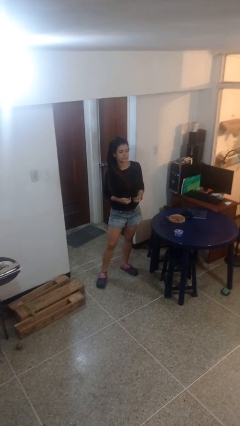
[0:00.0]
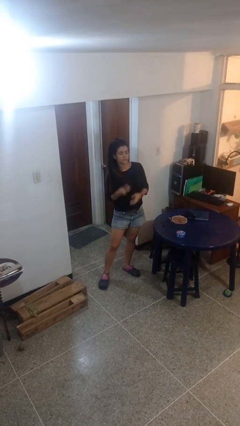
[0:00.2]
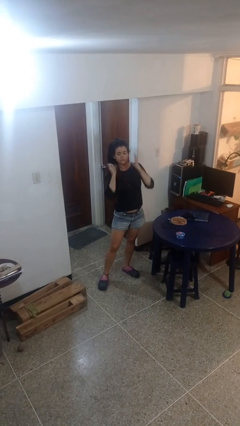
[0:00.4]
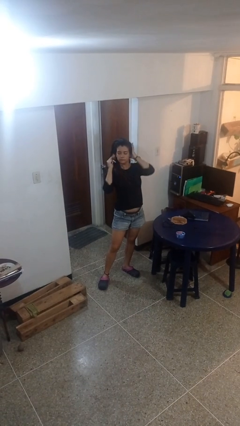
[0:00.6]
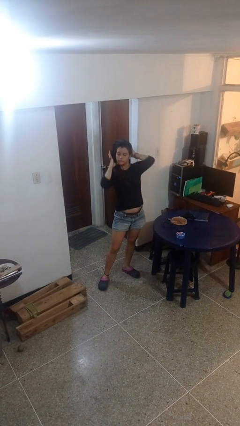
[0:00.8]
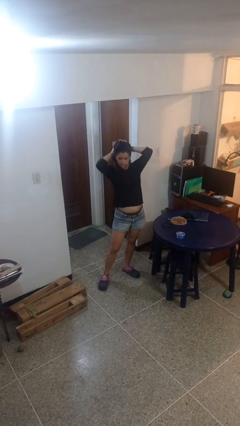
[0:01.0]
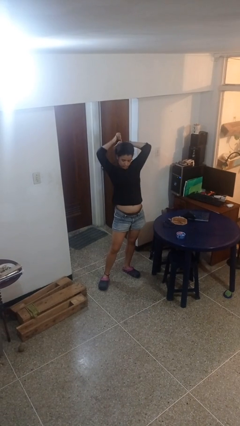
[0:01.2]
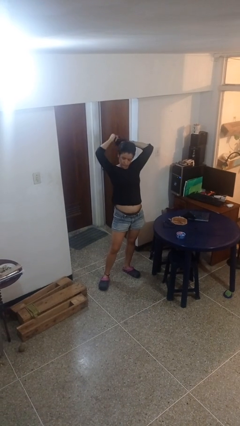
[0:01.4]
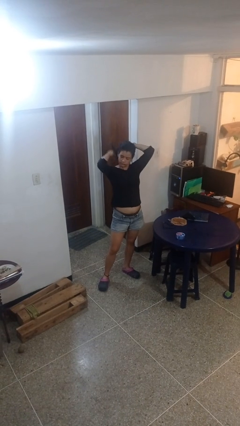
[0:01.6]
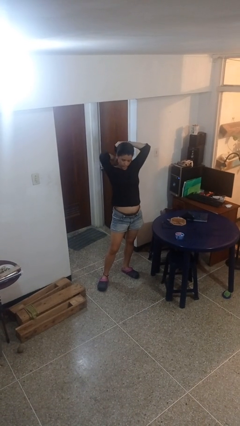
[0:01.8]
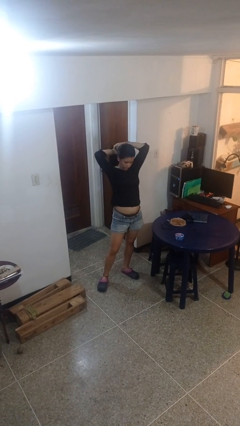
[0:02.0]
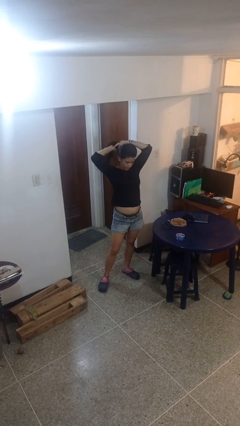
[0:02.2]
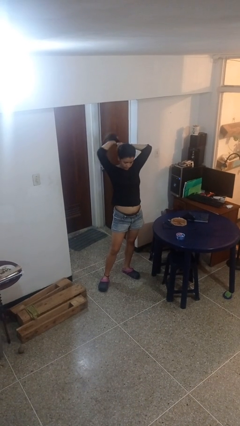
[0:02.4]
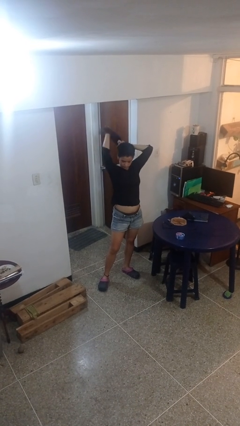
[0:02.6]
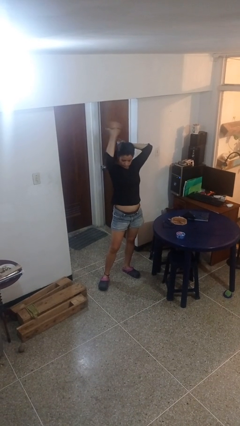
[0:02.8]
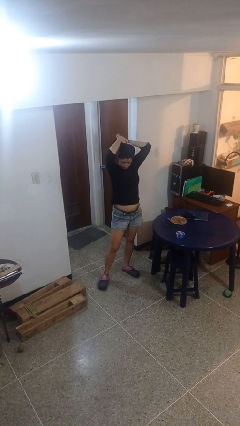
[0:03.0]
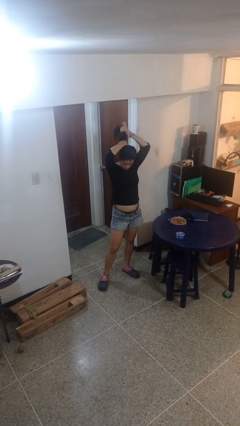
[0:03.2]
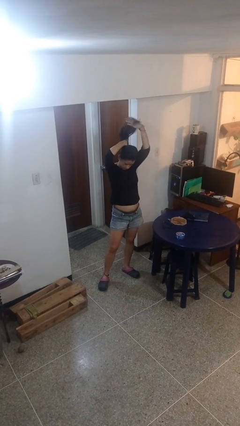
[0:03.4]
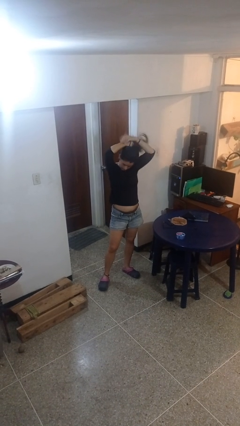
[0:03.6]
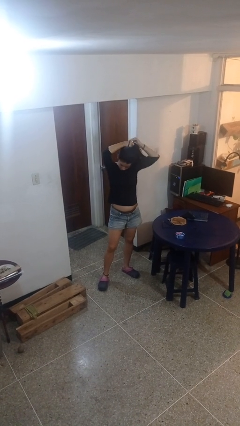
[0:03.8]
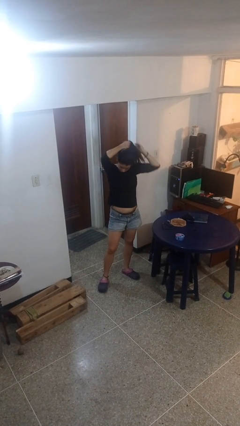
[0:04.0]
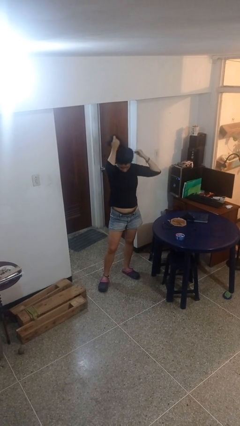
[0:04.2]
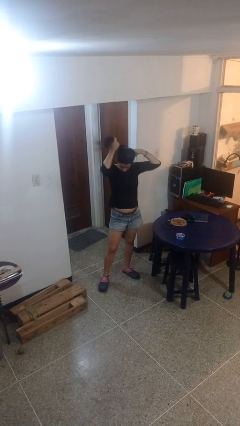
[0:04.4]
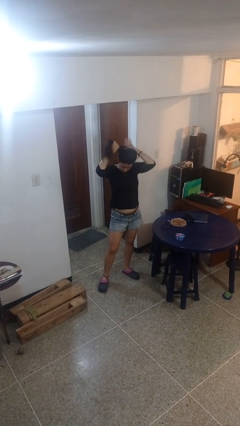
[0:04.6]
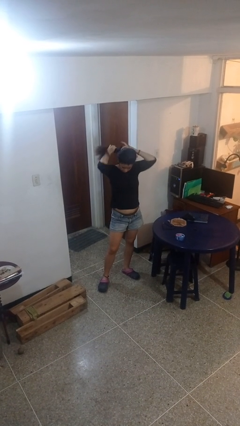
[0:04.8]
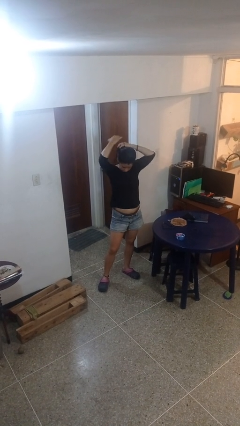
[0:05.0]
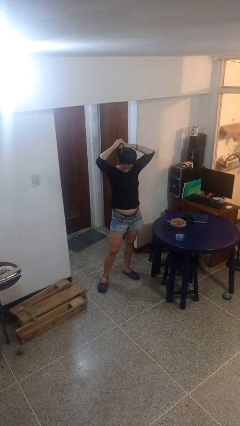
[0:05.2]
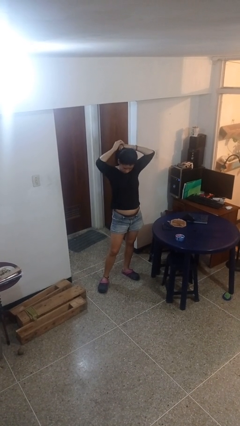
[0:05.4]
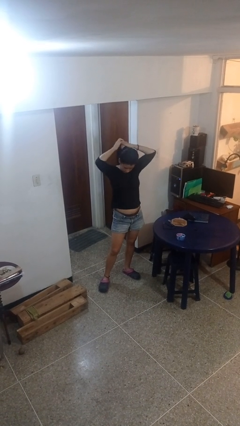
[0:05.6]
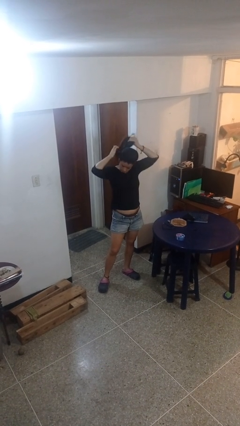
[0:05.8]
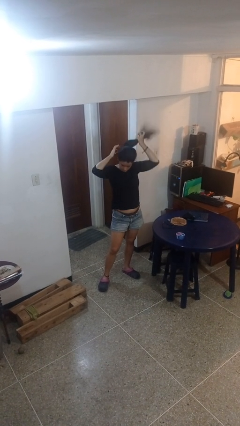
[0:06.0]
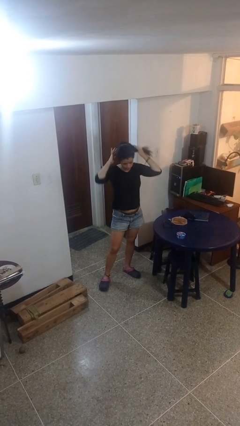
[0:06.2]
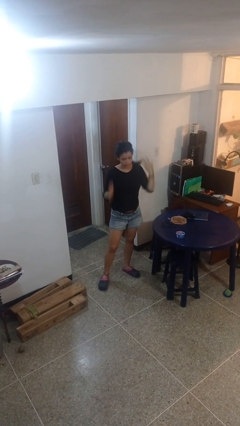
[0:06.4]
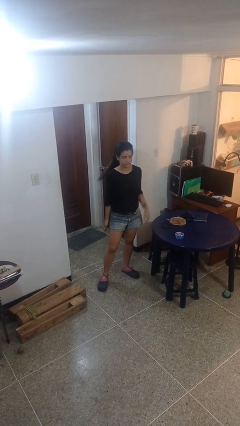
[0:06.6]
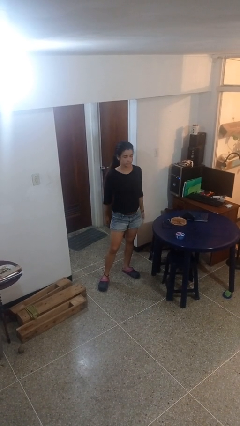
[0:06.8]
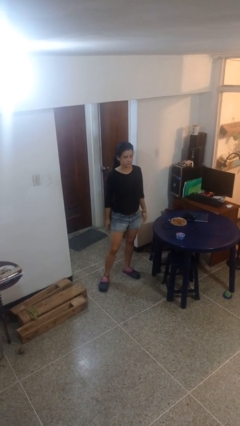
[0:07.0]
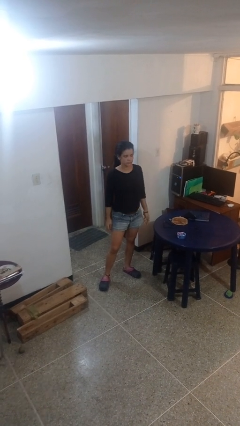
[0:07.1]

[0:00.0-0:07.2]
person puts hair in ponytail

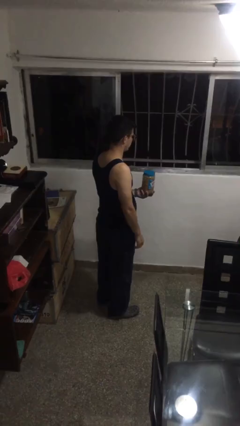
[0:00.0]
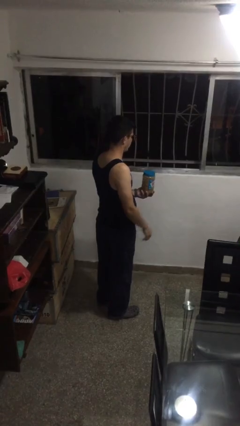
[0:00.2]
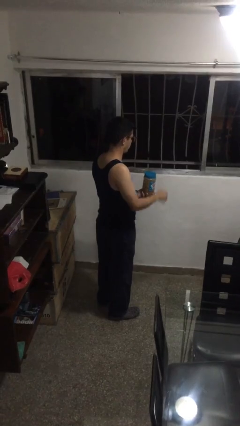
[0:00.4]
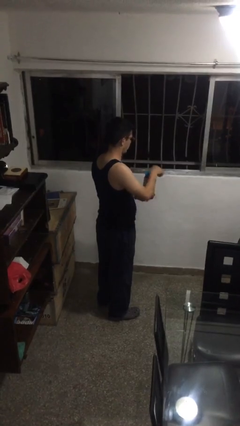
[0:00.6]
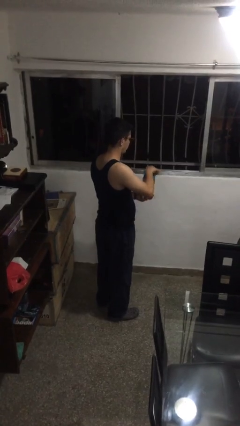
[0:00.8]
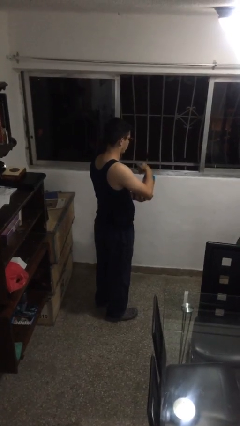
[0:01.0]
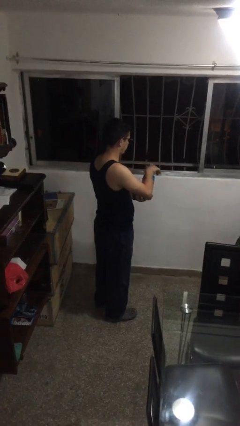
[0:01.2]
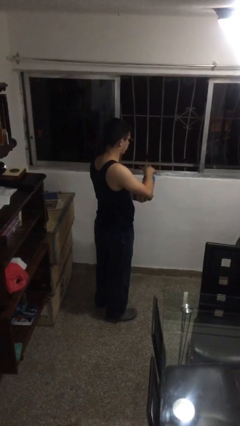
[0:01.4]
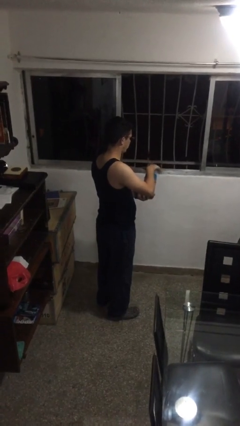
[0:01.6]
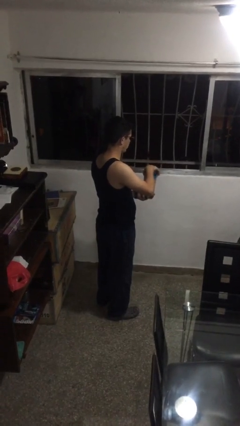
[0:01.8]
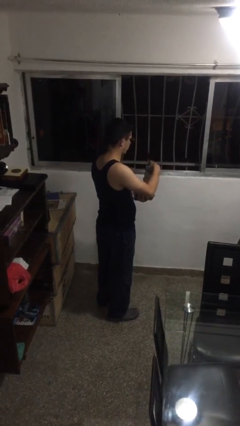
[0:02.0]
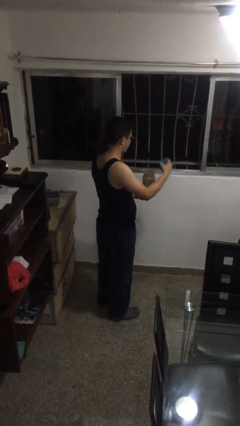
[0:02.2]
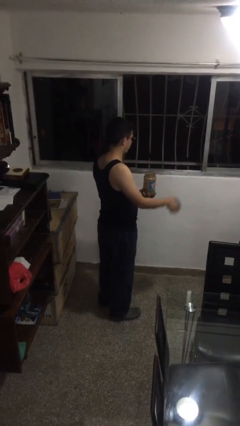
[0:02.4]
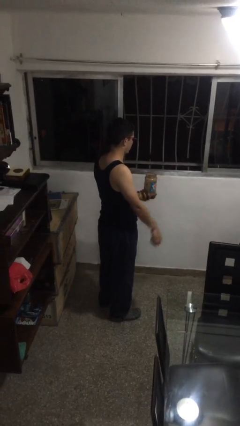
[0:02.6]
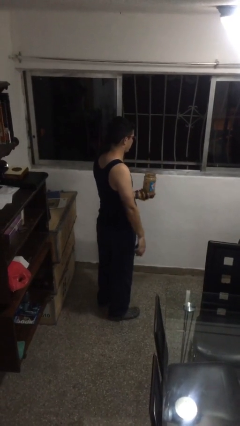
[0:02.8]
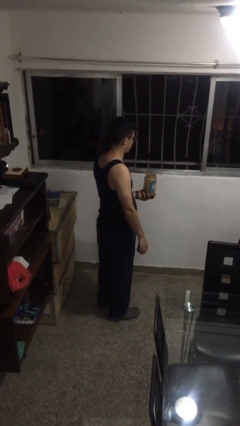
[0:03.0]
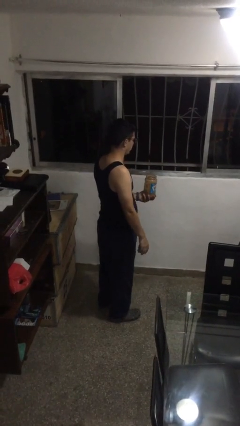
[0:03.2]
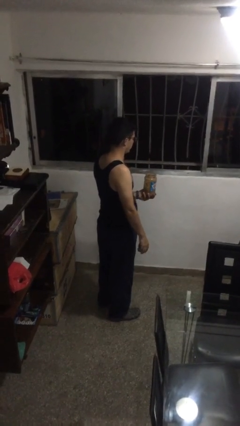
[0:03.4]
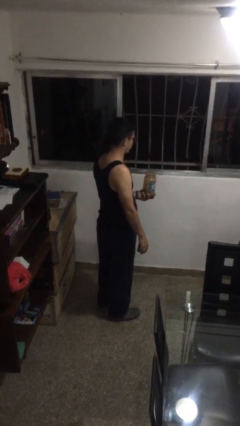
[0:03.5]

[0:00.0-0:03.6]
person opens jar

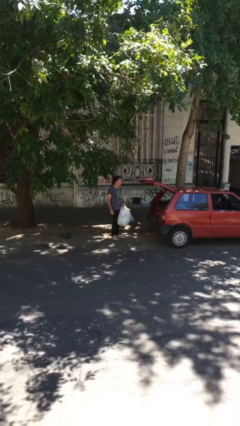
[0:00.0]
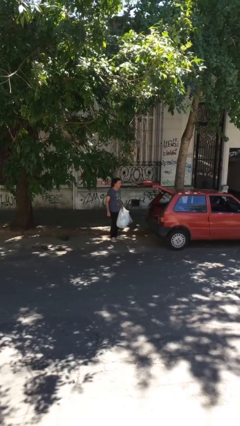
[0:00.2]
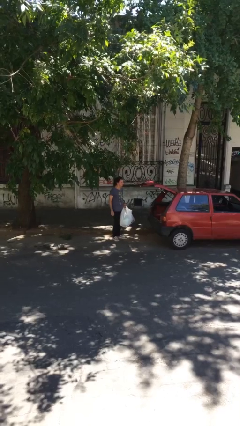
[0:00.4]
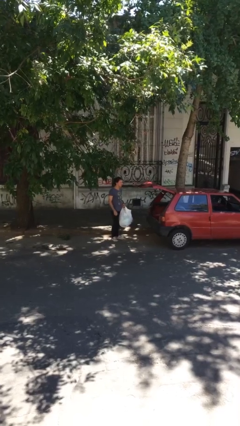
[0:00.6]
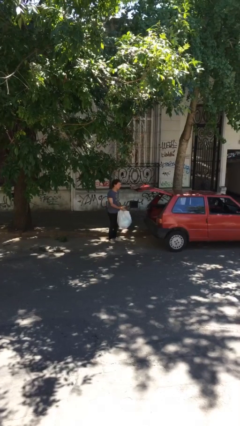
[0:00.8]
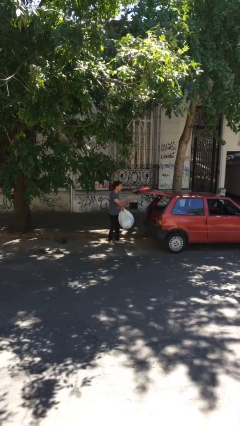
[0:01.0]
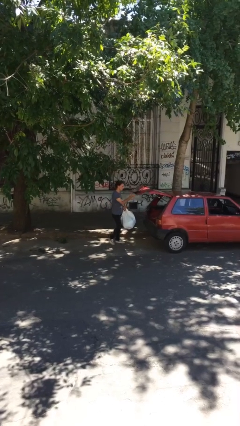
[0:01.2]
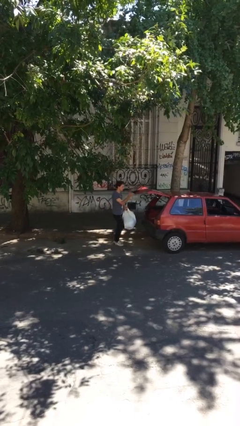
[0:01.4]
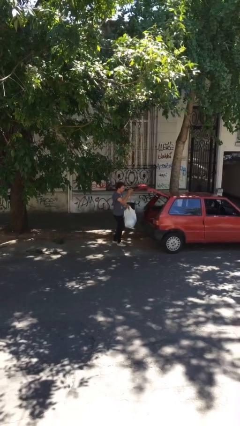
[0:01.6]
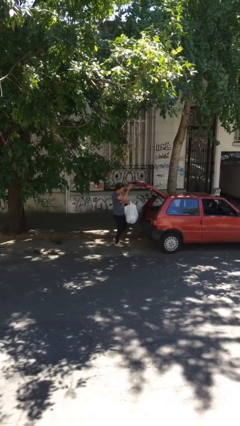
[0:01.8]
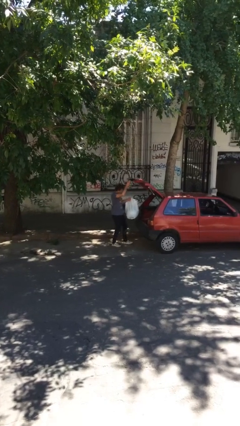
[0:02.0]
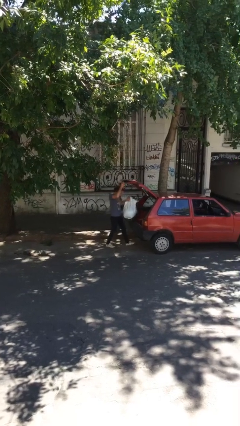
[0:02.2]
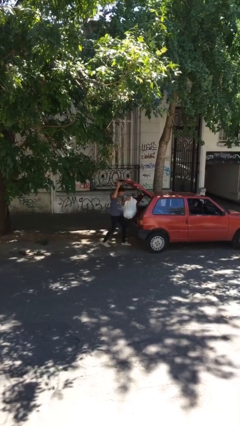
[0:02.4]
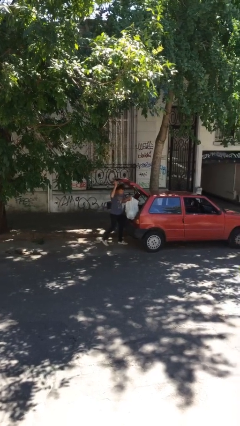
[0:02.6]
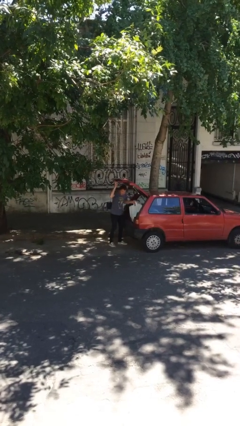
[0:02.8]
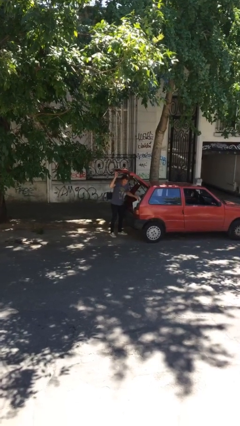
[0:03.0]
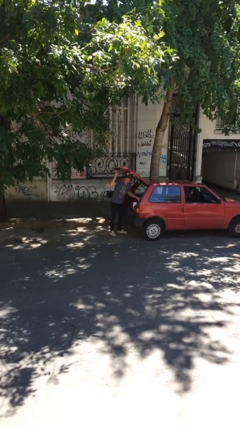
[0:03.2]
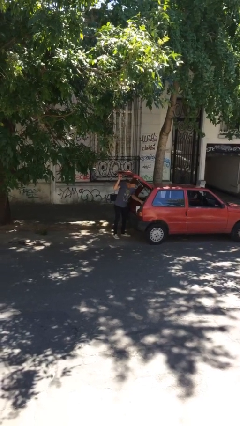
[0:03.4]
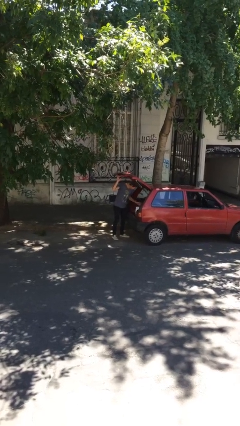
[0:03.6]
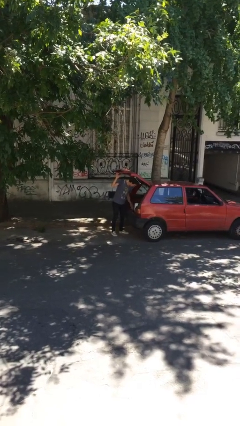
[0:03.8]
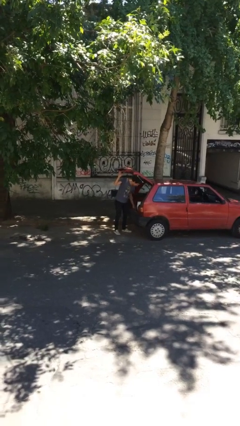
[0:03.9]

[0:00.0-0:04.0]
person loads car

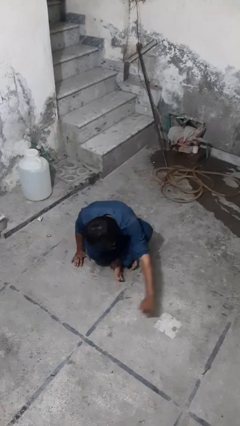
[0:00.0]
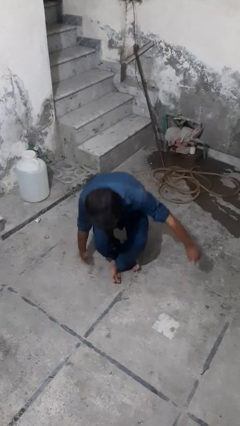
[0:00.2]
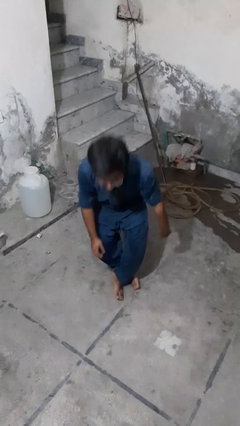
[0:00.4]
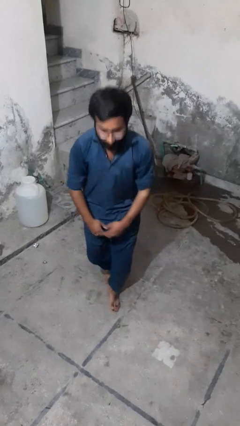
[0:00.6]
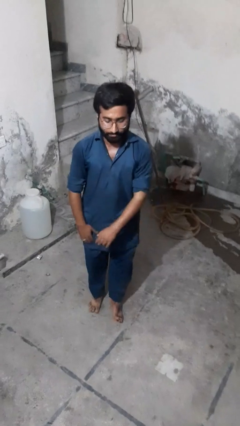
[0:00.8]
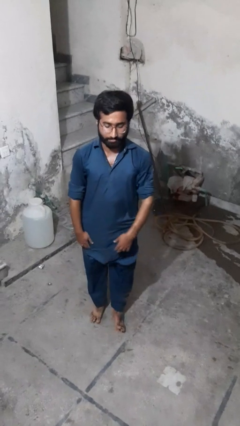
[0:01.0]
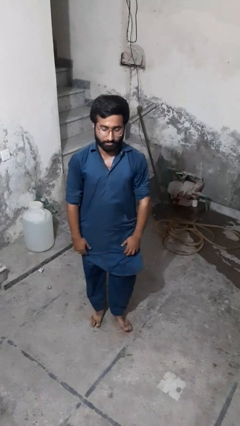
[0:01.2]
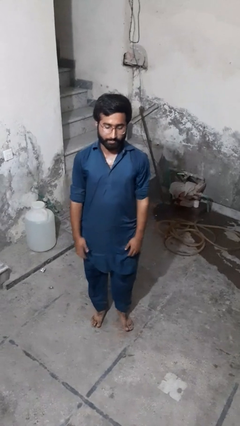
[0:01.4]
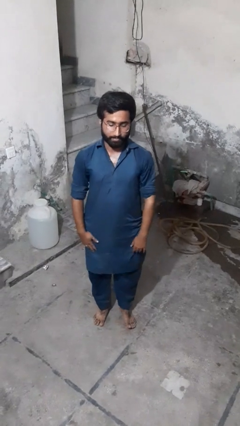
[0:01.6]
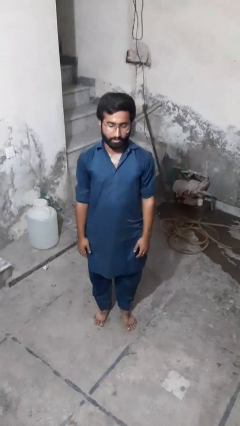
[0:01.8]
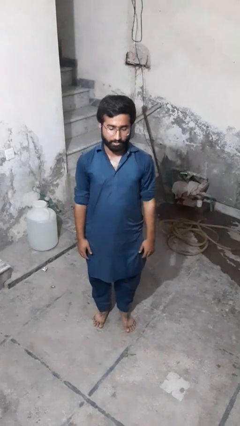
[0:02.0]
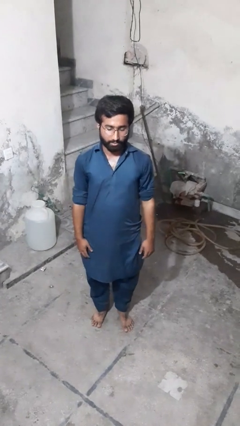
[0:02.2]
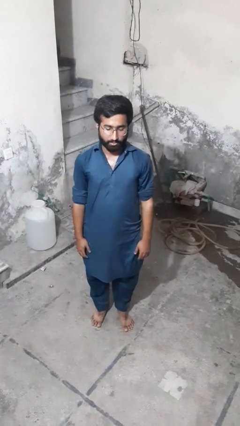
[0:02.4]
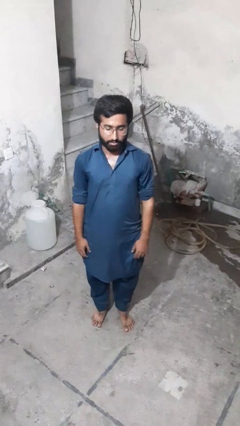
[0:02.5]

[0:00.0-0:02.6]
person stands up from floor

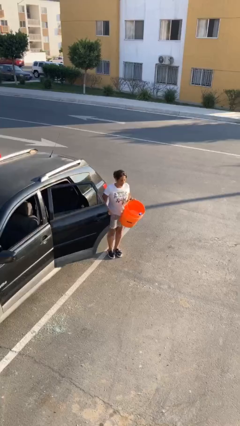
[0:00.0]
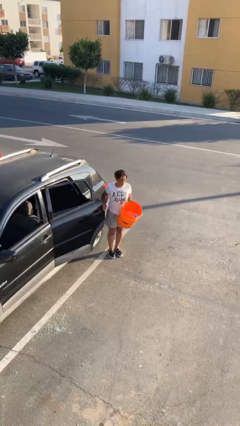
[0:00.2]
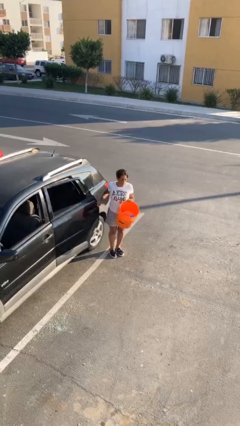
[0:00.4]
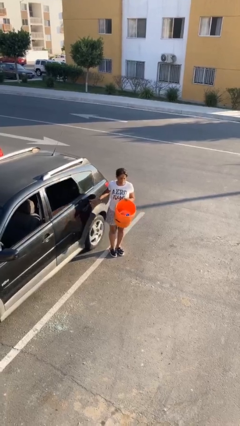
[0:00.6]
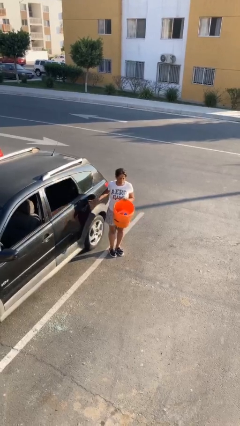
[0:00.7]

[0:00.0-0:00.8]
person closes car door
